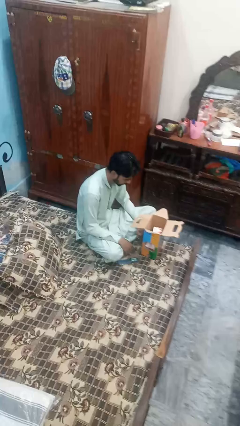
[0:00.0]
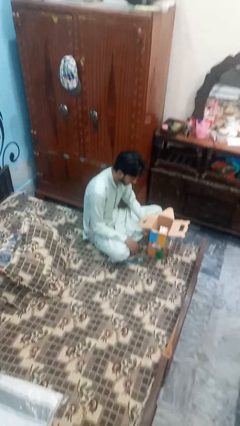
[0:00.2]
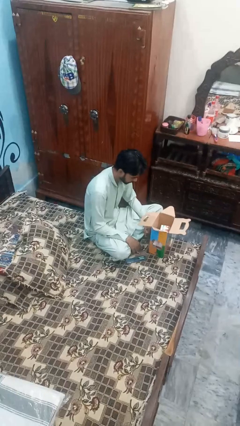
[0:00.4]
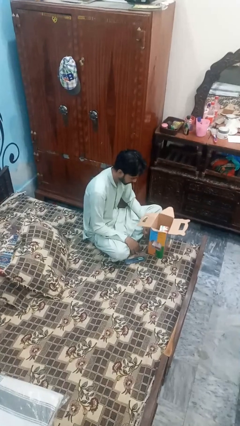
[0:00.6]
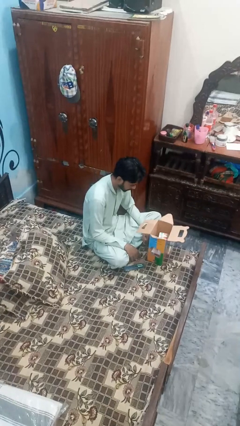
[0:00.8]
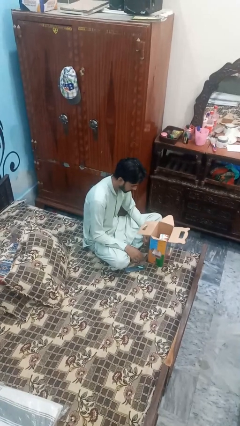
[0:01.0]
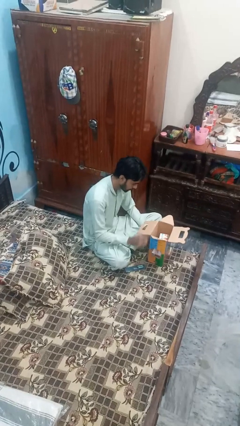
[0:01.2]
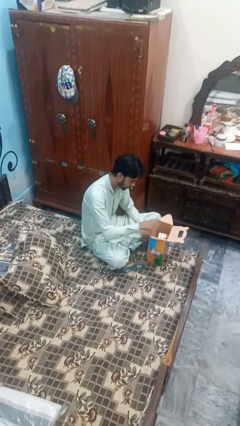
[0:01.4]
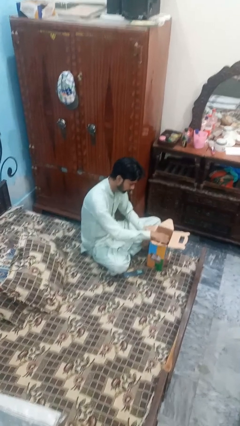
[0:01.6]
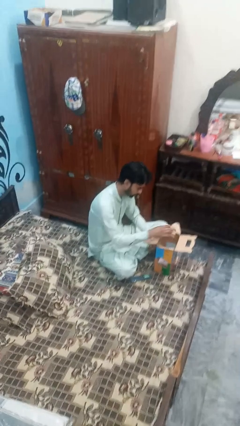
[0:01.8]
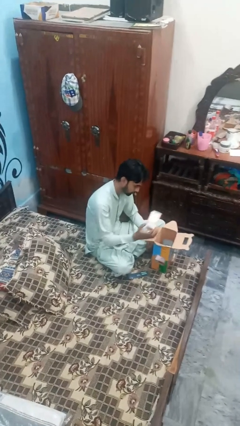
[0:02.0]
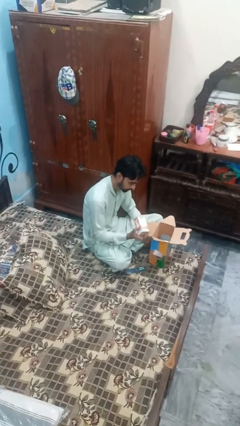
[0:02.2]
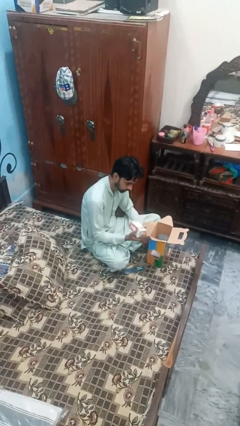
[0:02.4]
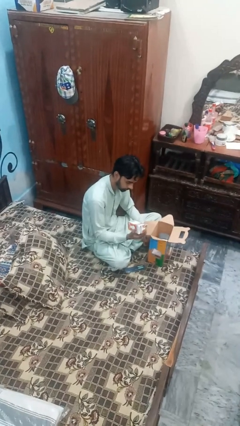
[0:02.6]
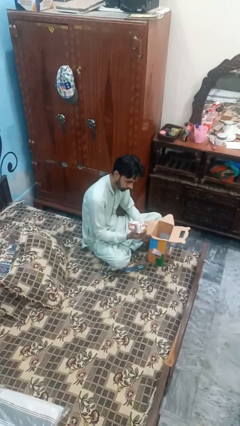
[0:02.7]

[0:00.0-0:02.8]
person takes object from box

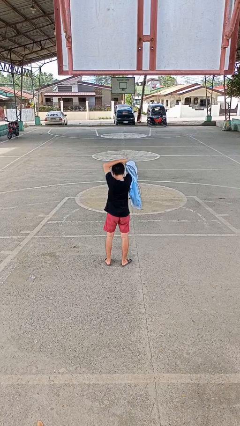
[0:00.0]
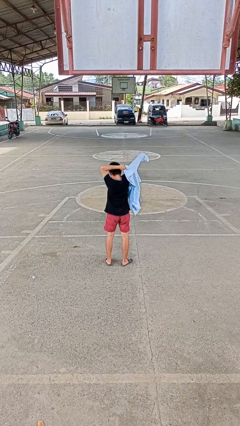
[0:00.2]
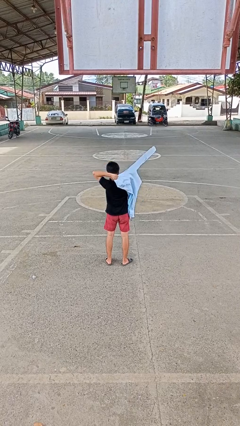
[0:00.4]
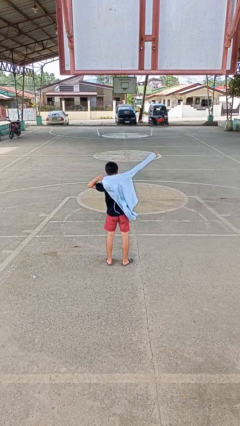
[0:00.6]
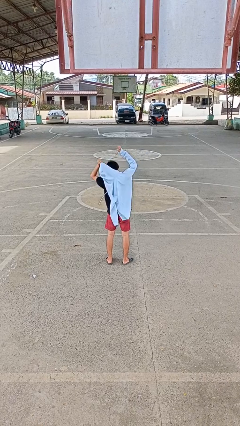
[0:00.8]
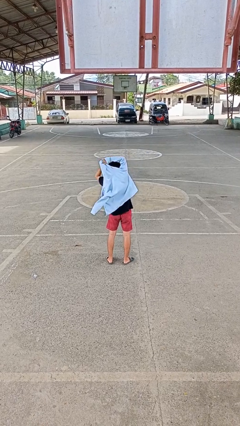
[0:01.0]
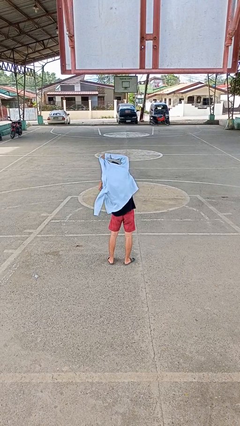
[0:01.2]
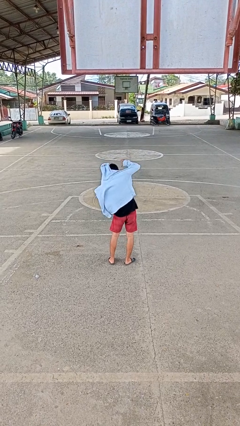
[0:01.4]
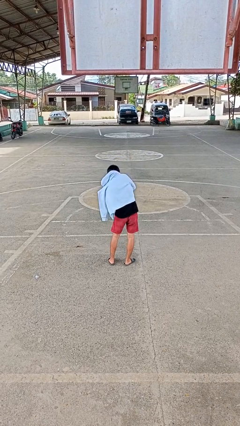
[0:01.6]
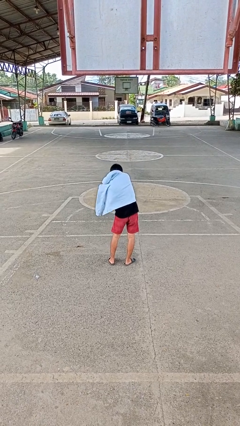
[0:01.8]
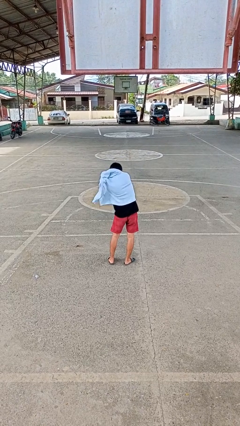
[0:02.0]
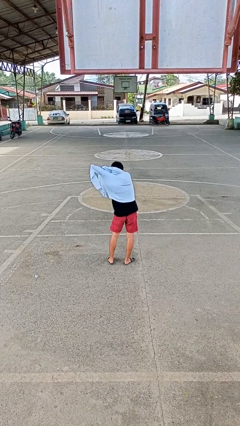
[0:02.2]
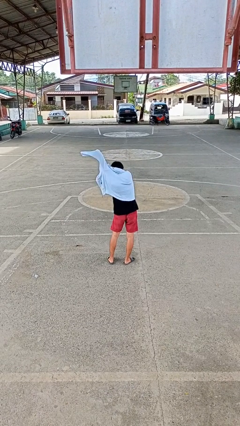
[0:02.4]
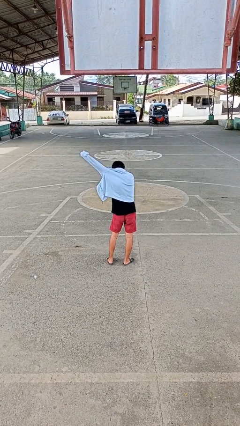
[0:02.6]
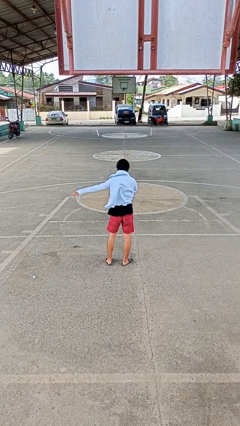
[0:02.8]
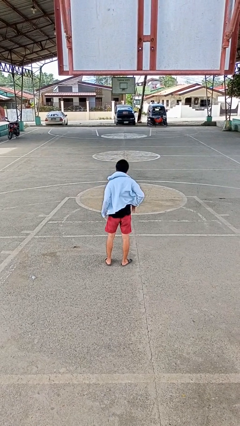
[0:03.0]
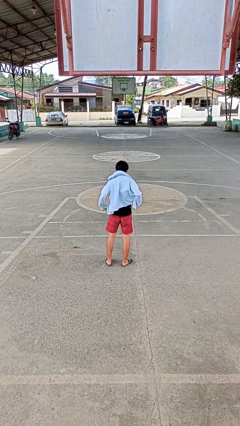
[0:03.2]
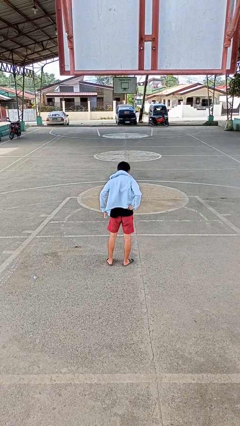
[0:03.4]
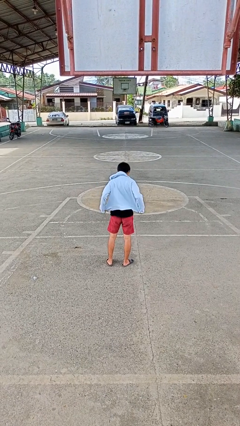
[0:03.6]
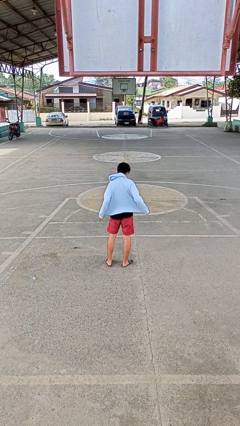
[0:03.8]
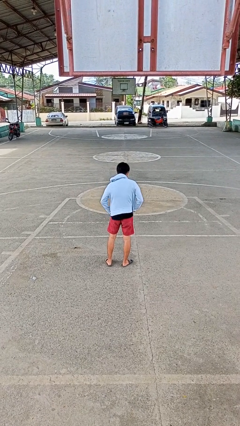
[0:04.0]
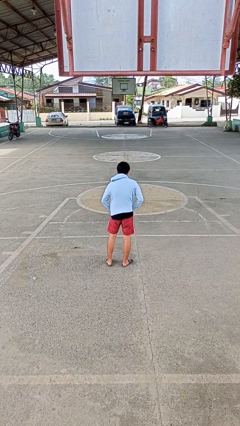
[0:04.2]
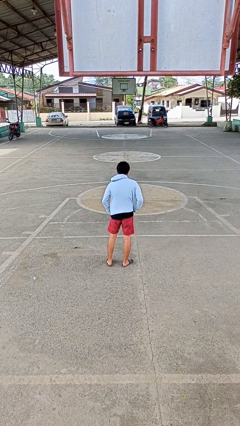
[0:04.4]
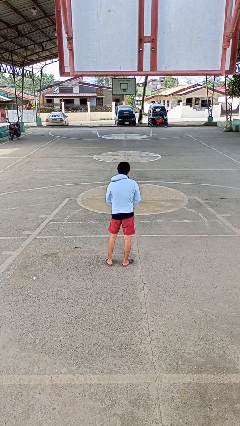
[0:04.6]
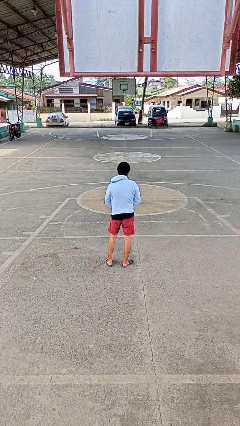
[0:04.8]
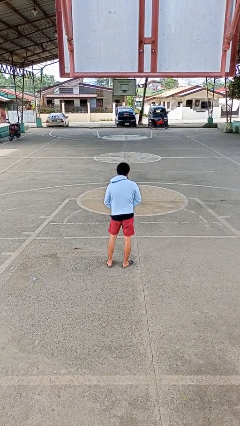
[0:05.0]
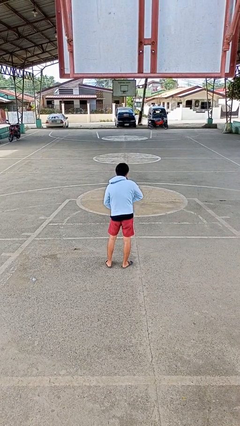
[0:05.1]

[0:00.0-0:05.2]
person puts on jacket

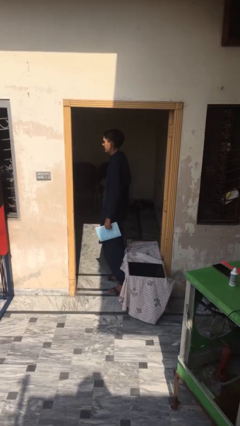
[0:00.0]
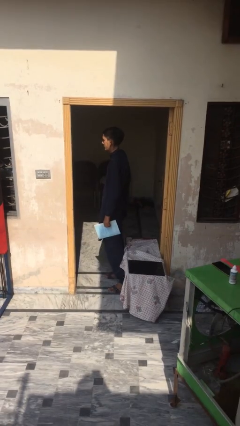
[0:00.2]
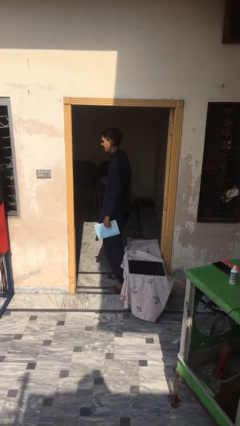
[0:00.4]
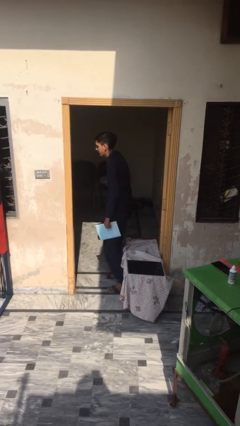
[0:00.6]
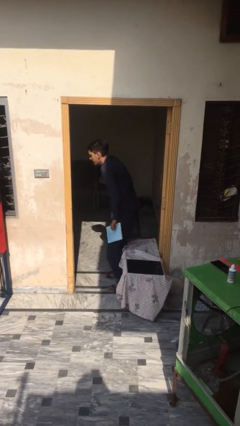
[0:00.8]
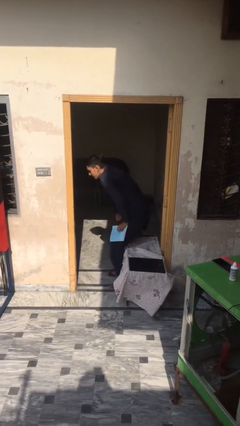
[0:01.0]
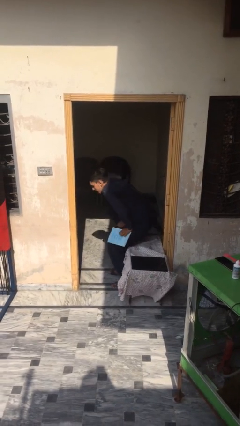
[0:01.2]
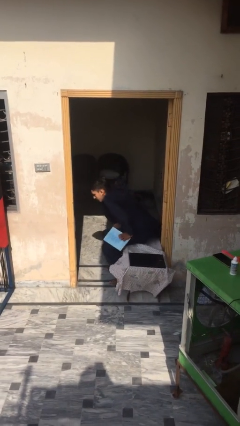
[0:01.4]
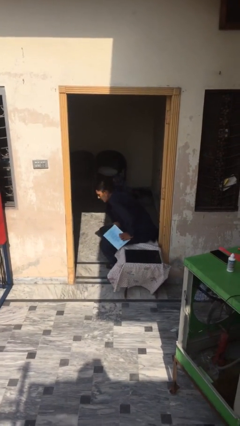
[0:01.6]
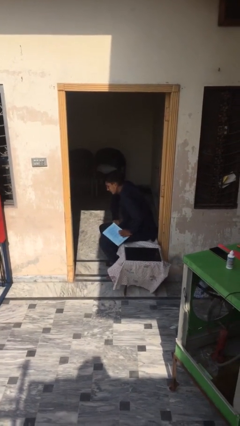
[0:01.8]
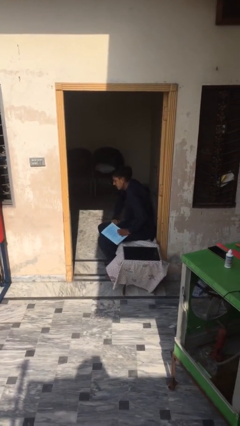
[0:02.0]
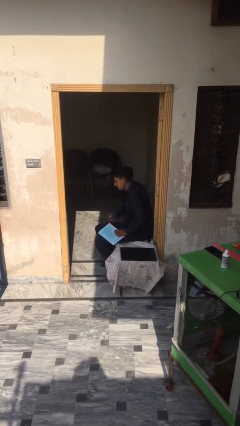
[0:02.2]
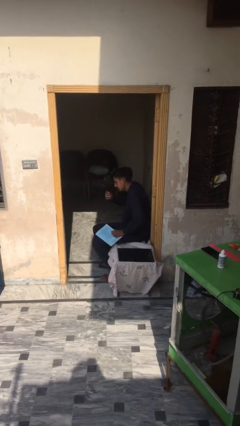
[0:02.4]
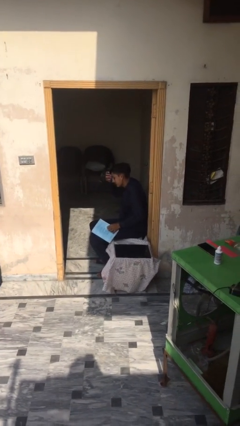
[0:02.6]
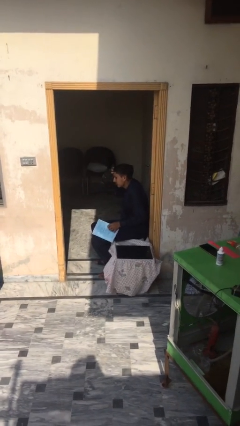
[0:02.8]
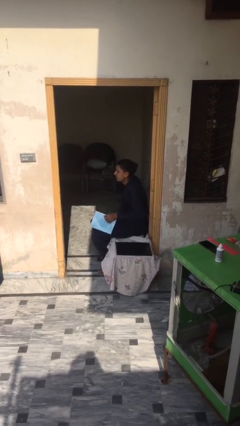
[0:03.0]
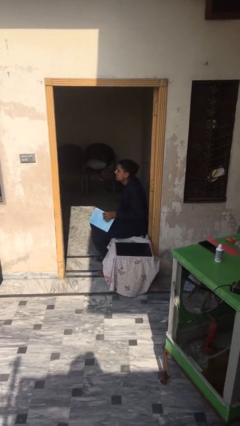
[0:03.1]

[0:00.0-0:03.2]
person sits down

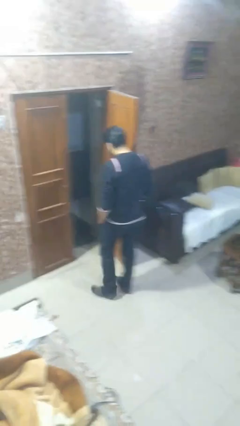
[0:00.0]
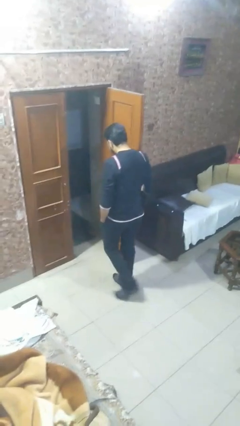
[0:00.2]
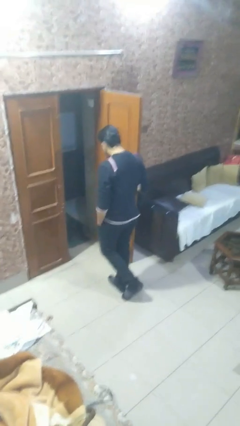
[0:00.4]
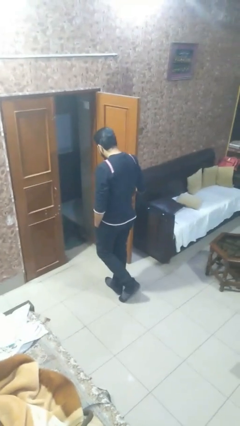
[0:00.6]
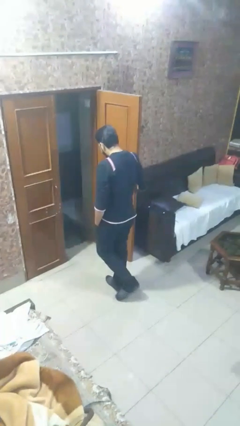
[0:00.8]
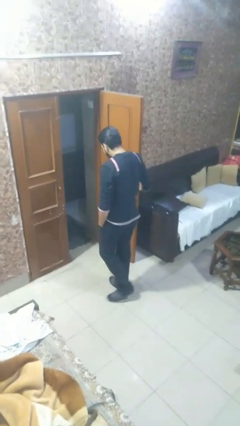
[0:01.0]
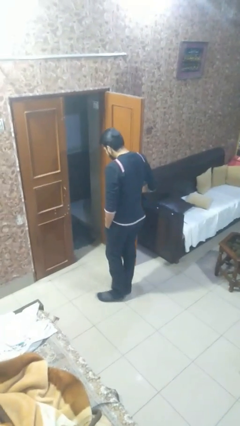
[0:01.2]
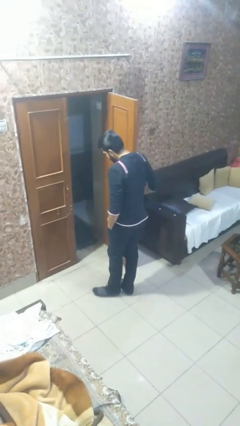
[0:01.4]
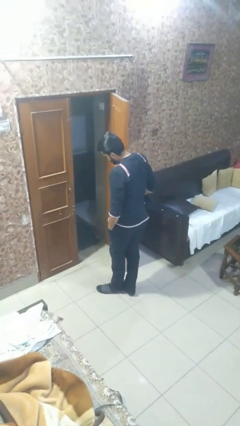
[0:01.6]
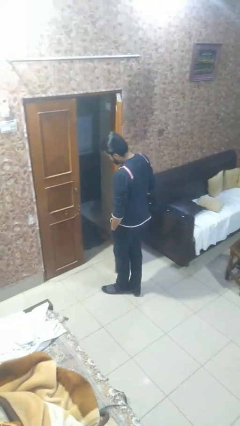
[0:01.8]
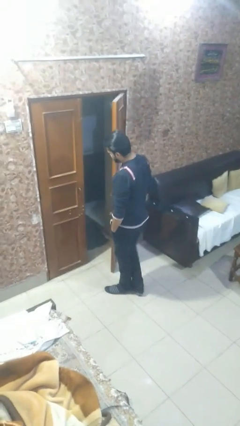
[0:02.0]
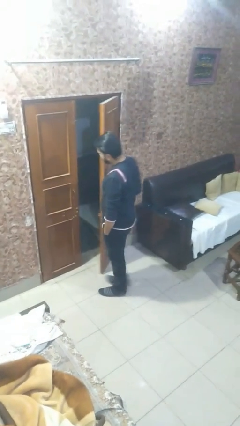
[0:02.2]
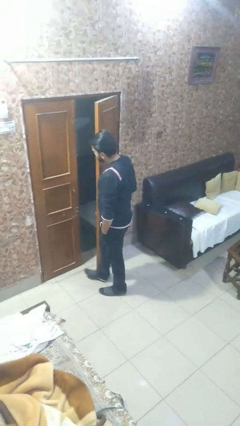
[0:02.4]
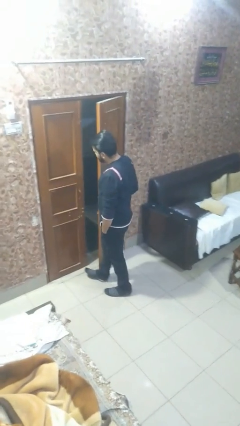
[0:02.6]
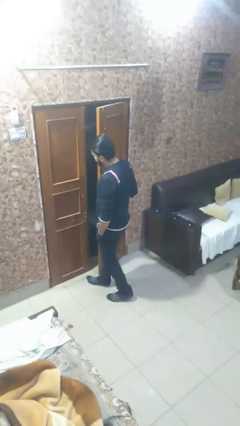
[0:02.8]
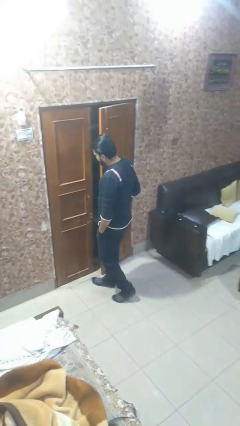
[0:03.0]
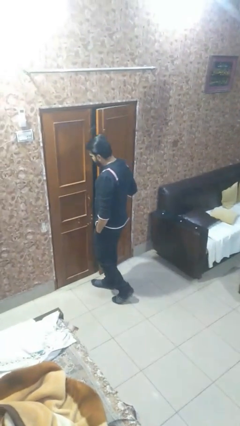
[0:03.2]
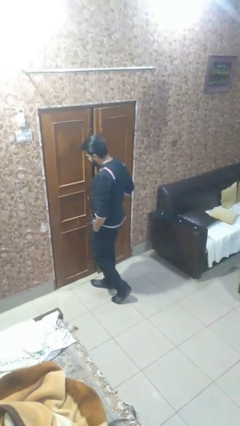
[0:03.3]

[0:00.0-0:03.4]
person opens facility door

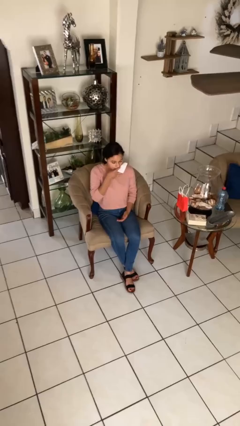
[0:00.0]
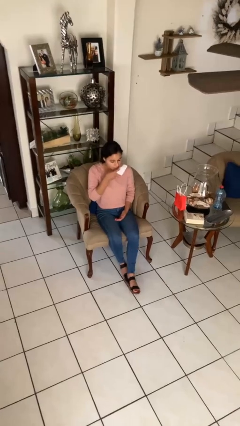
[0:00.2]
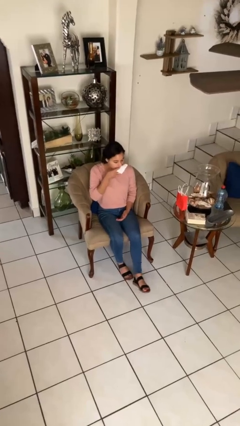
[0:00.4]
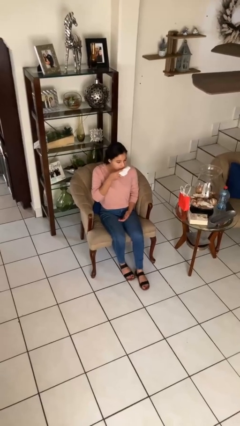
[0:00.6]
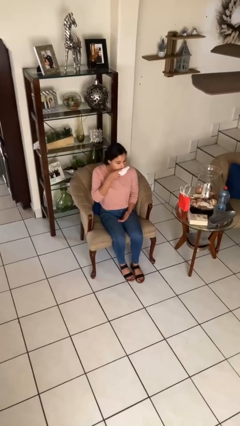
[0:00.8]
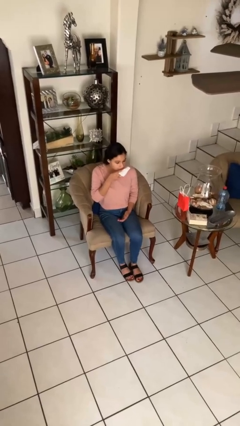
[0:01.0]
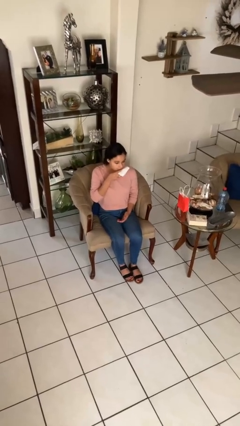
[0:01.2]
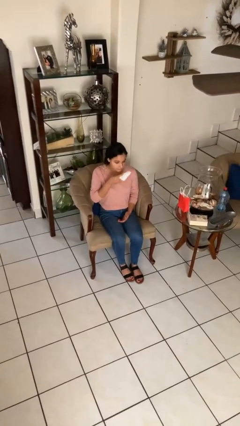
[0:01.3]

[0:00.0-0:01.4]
person wipes mouth with napkin

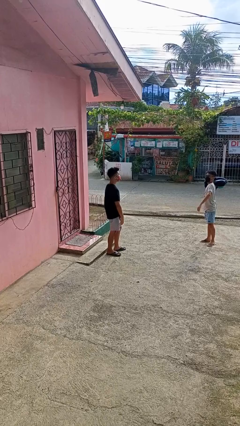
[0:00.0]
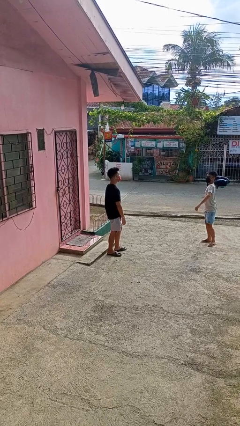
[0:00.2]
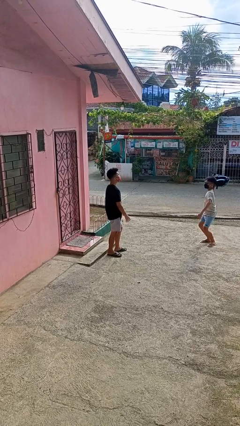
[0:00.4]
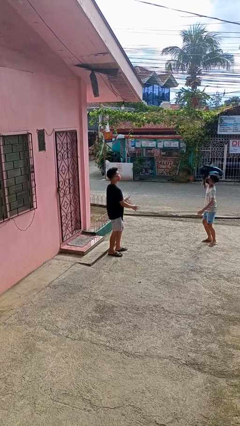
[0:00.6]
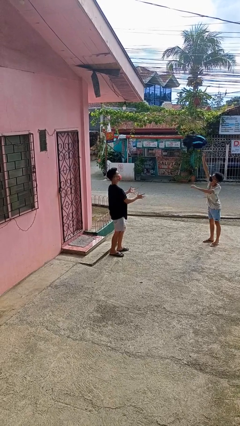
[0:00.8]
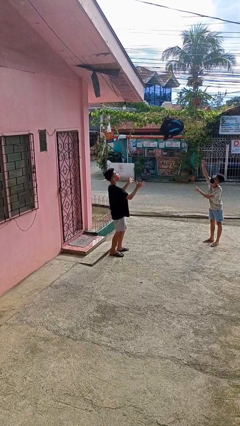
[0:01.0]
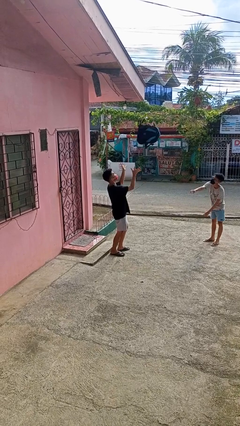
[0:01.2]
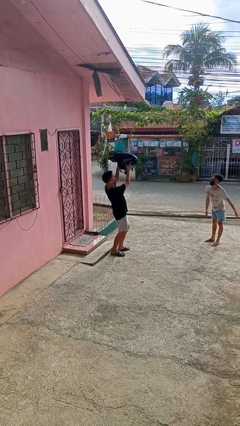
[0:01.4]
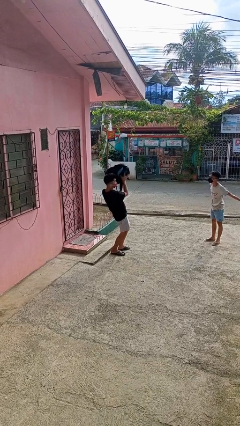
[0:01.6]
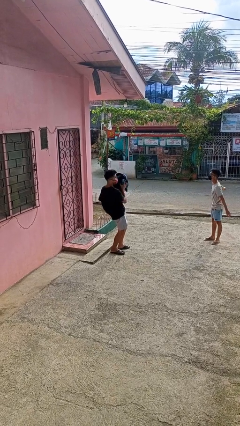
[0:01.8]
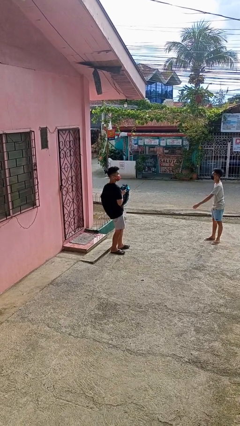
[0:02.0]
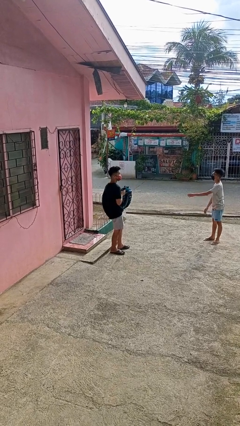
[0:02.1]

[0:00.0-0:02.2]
person catches object from person
